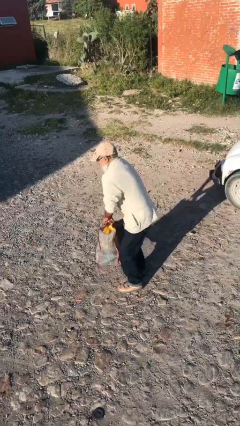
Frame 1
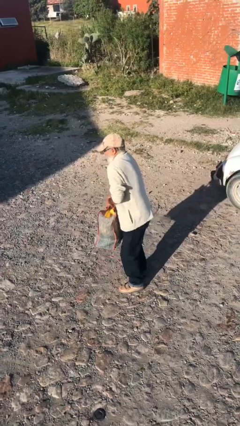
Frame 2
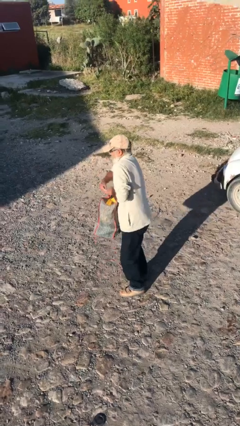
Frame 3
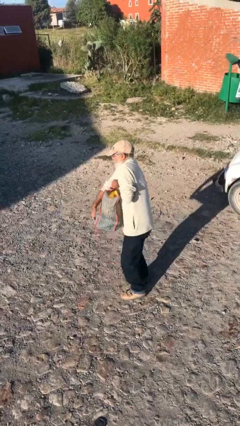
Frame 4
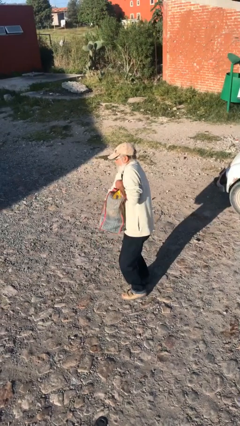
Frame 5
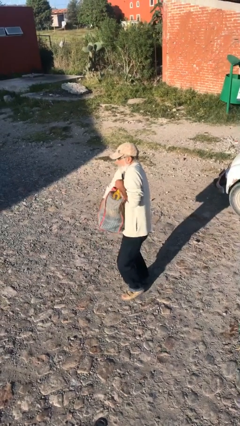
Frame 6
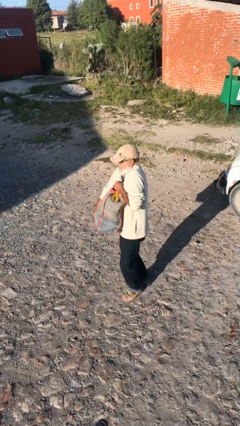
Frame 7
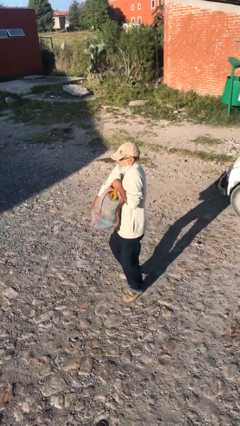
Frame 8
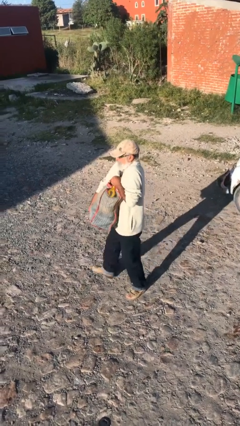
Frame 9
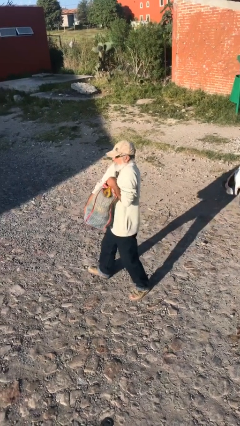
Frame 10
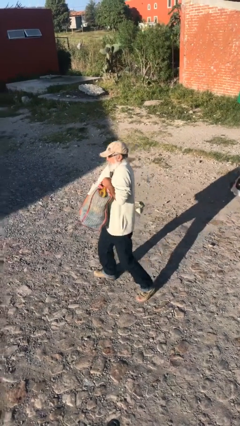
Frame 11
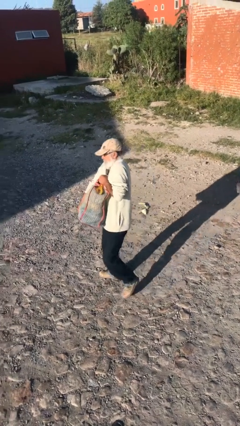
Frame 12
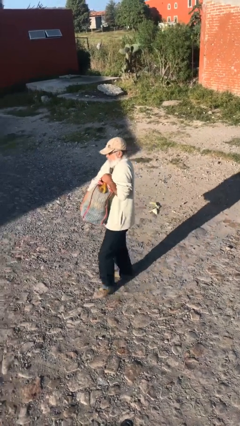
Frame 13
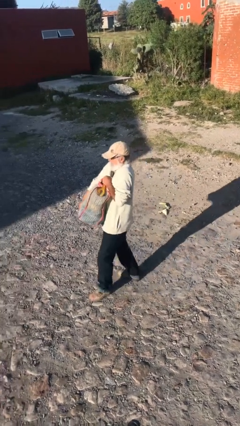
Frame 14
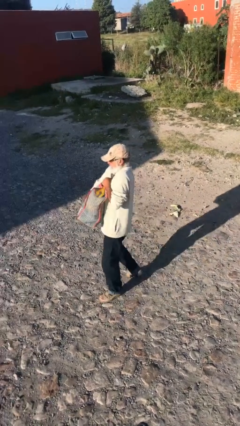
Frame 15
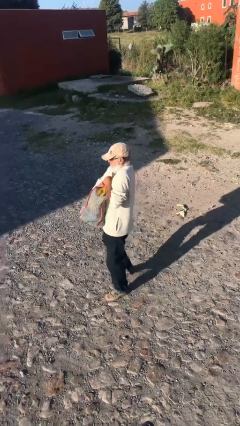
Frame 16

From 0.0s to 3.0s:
person carries heavy object

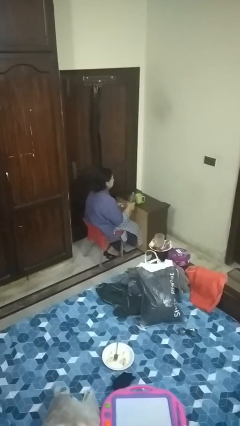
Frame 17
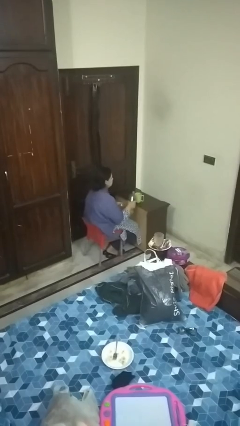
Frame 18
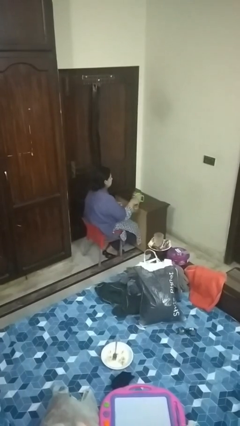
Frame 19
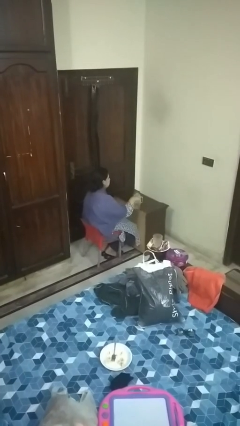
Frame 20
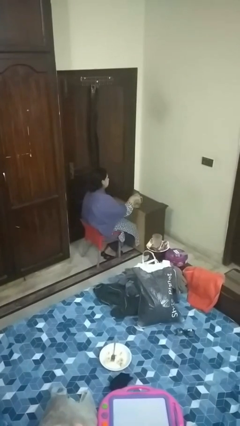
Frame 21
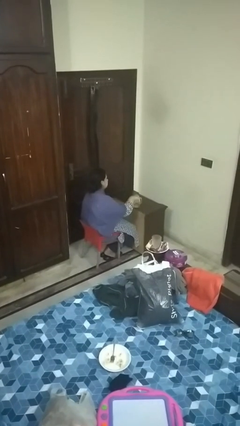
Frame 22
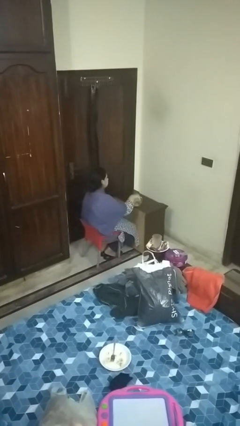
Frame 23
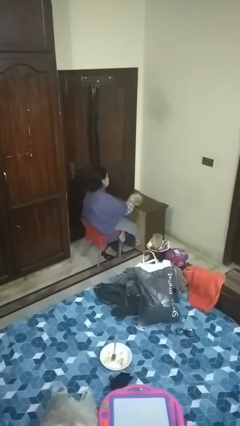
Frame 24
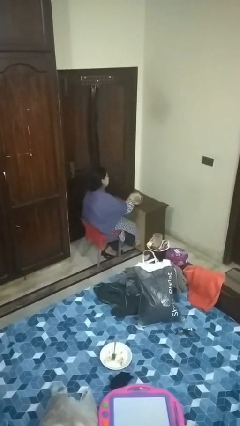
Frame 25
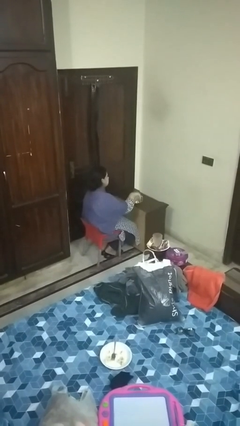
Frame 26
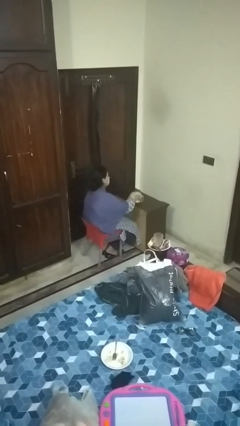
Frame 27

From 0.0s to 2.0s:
person pours liquid into cup

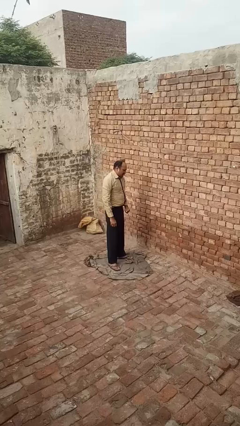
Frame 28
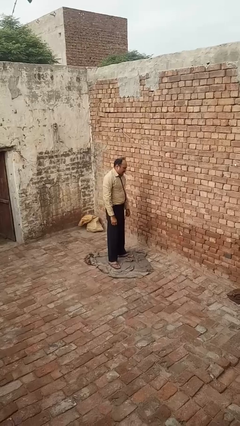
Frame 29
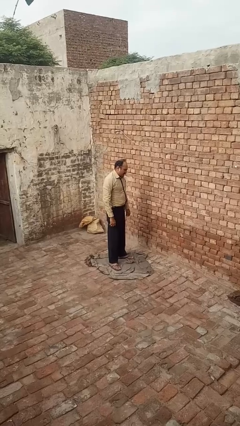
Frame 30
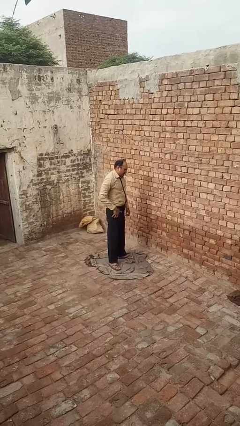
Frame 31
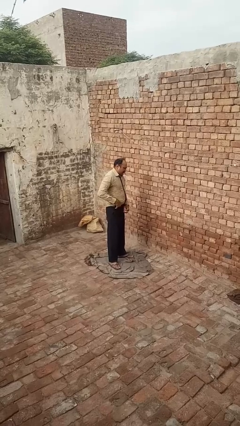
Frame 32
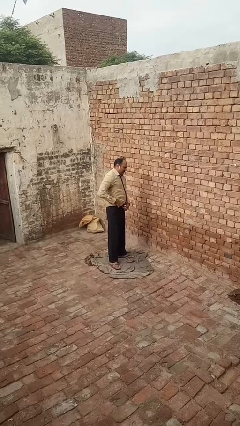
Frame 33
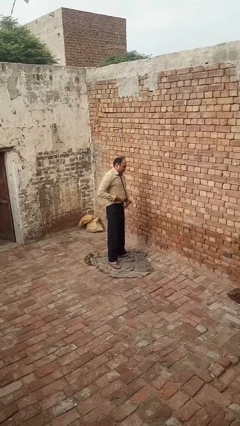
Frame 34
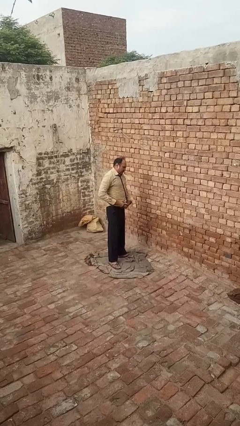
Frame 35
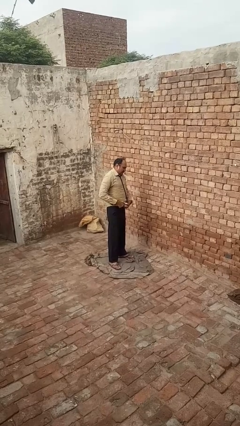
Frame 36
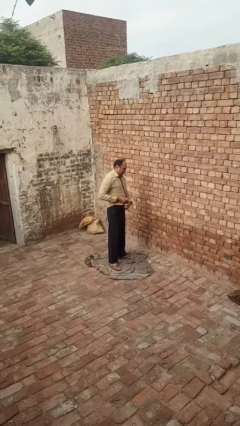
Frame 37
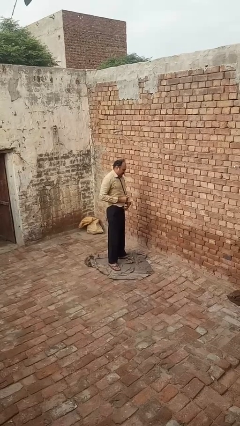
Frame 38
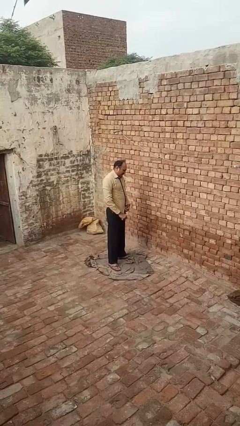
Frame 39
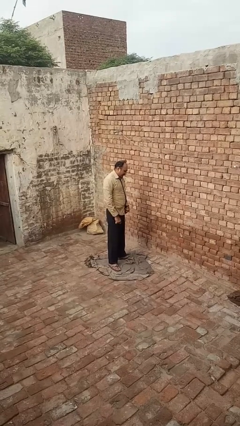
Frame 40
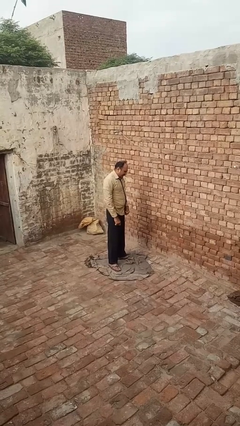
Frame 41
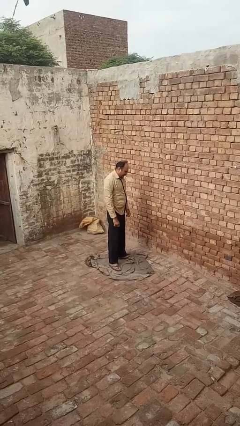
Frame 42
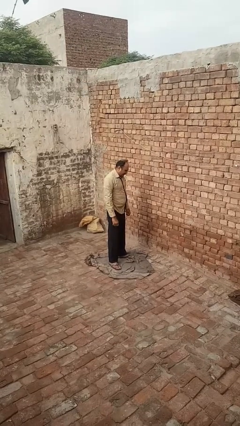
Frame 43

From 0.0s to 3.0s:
person untucks shirt

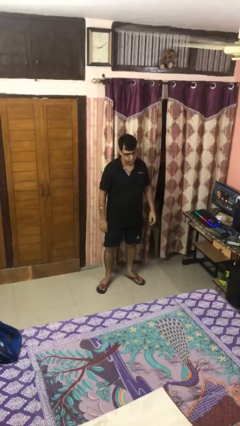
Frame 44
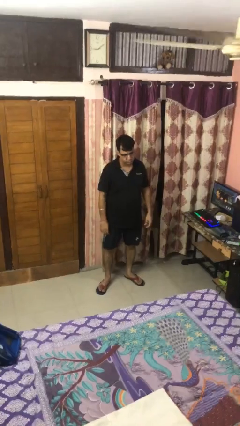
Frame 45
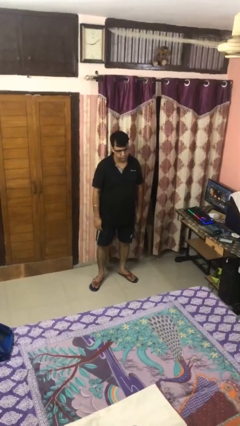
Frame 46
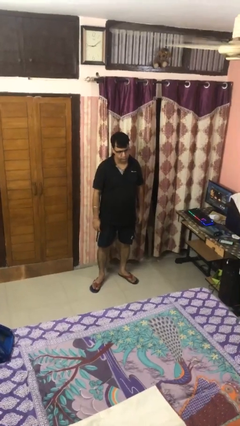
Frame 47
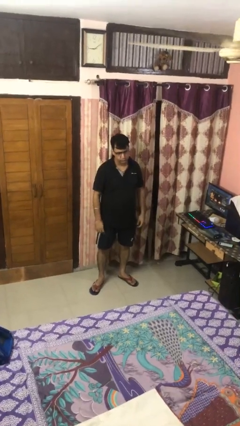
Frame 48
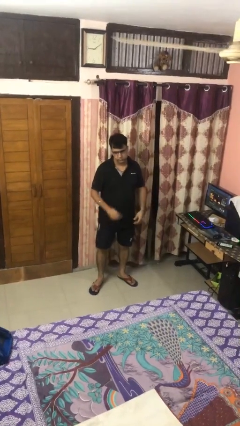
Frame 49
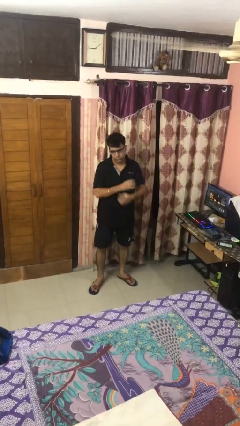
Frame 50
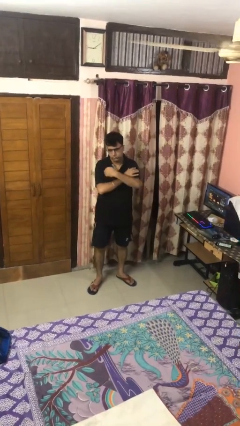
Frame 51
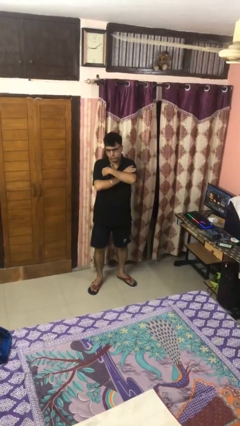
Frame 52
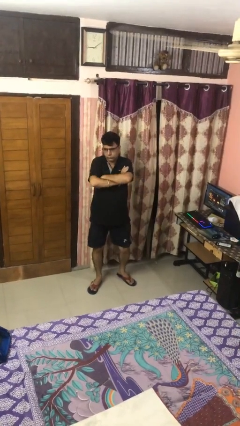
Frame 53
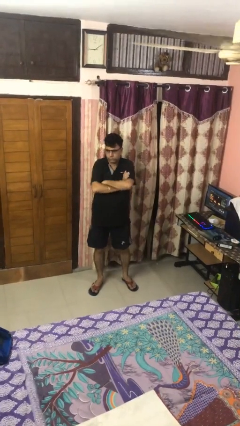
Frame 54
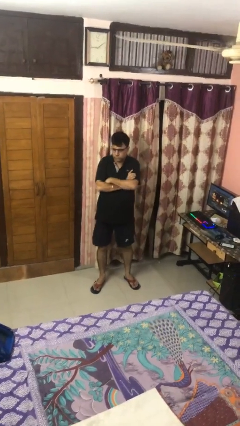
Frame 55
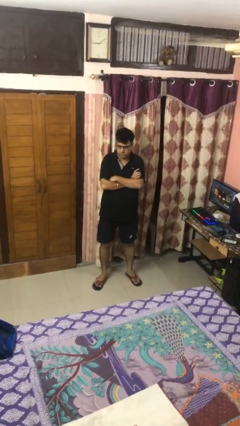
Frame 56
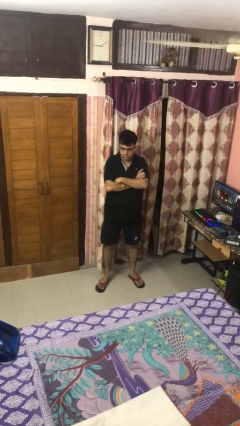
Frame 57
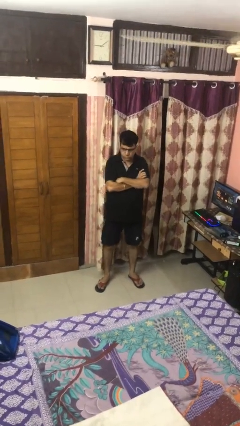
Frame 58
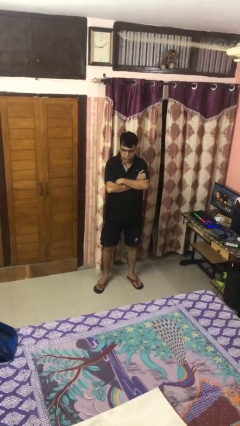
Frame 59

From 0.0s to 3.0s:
person crosses arms

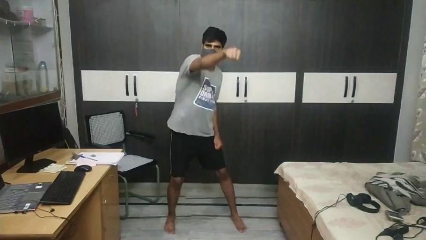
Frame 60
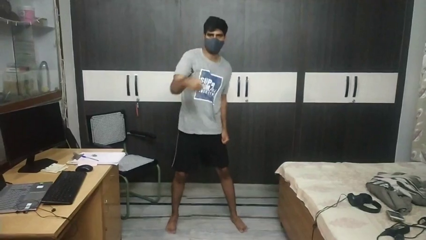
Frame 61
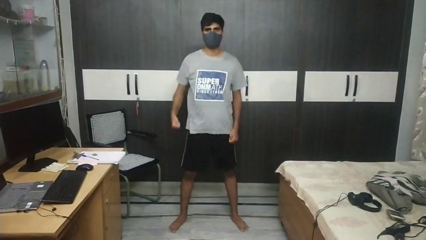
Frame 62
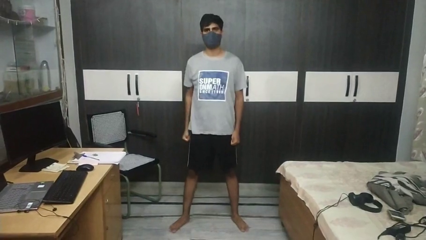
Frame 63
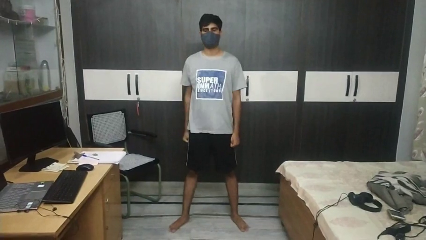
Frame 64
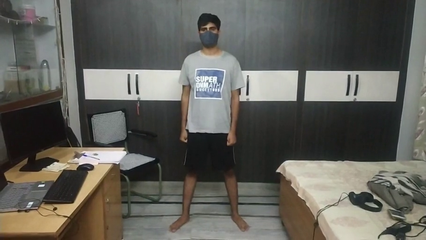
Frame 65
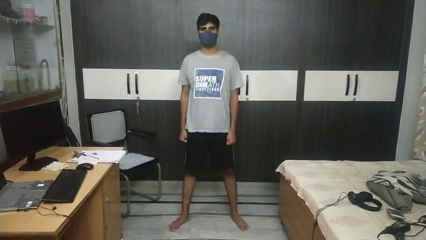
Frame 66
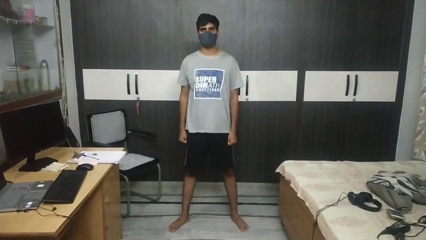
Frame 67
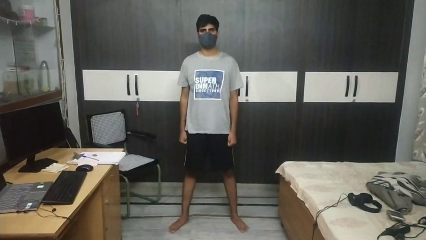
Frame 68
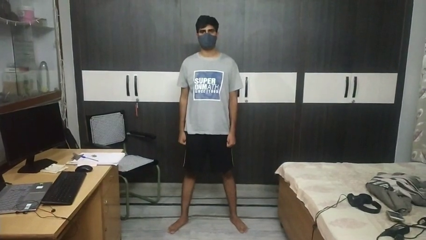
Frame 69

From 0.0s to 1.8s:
person punches

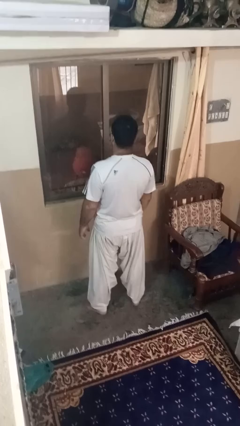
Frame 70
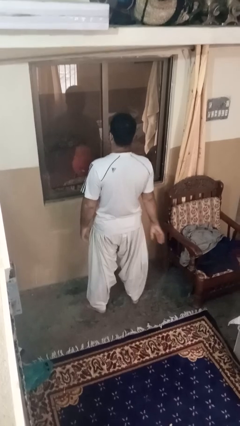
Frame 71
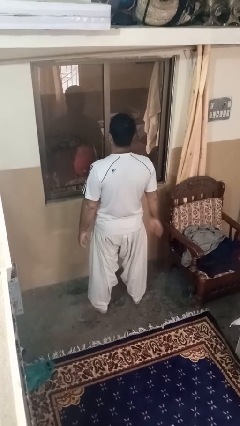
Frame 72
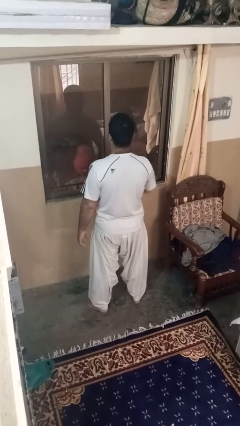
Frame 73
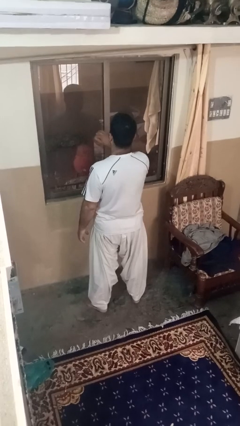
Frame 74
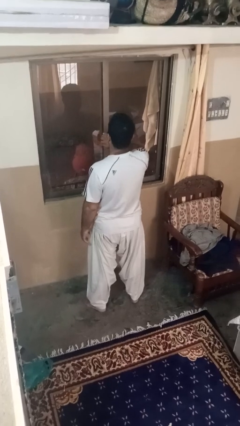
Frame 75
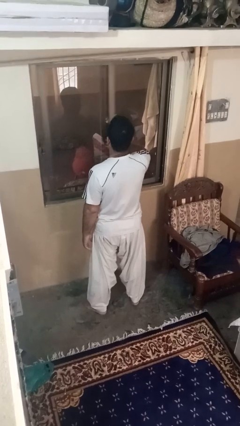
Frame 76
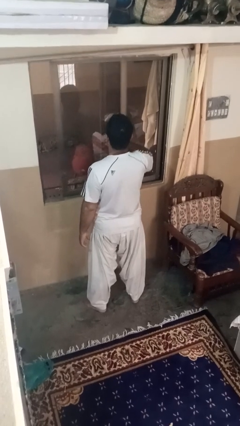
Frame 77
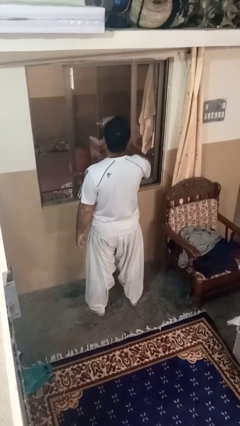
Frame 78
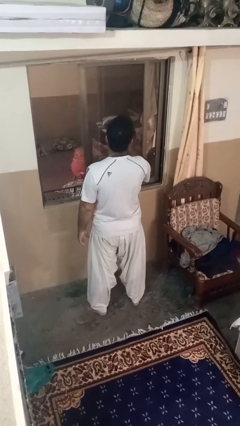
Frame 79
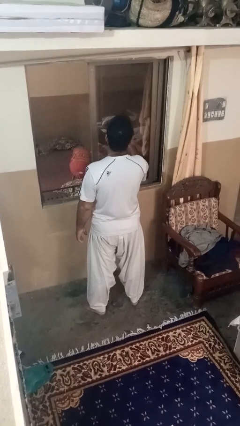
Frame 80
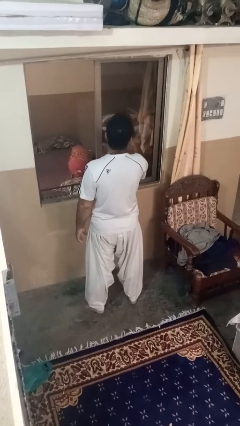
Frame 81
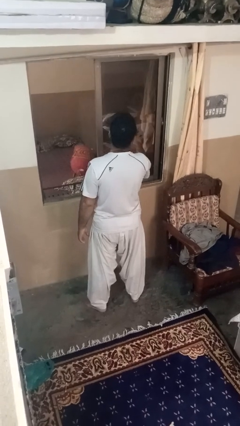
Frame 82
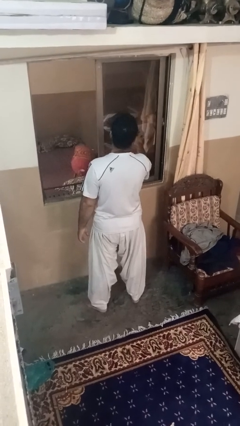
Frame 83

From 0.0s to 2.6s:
person opens home window

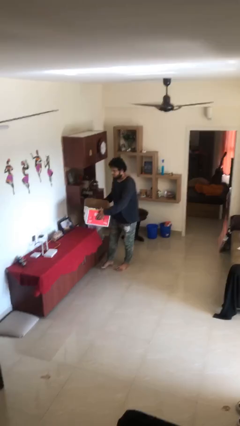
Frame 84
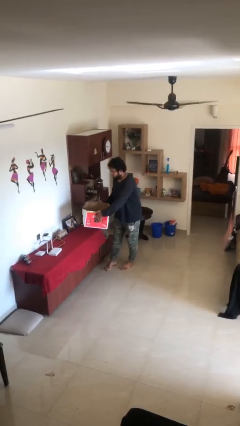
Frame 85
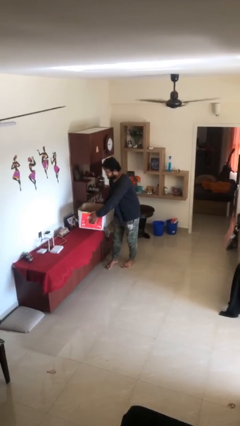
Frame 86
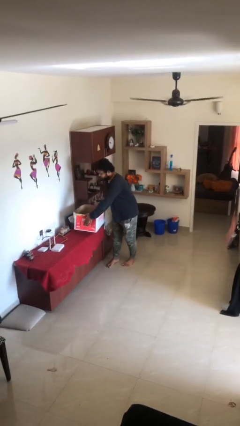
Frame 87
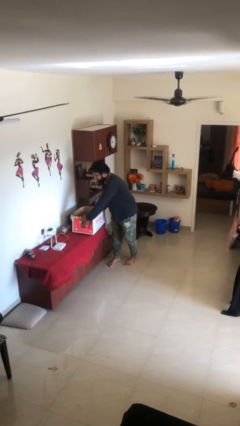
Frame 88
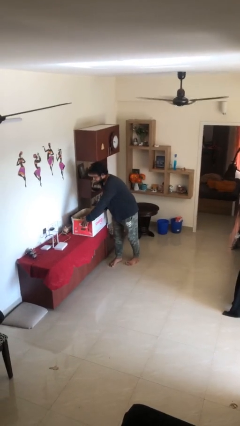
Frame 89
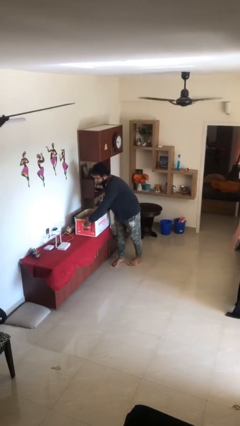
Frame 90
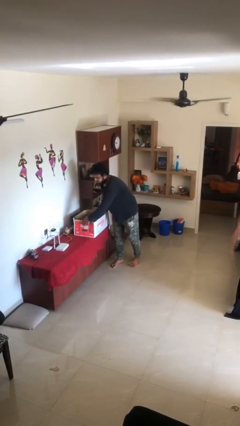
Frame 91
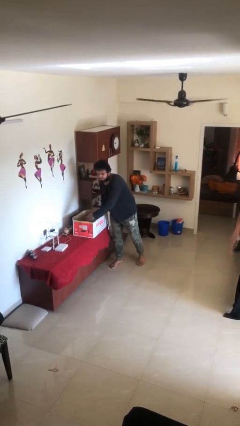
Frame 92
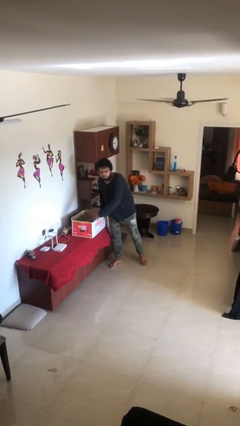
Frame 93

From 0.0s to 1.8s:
person puts down object on table
